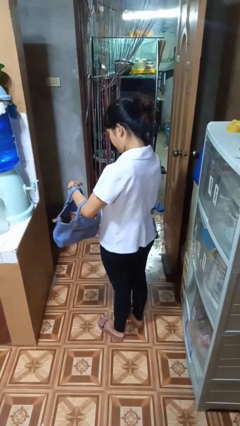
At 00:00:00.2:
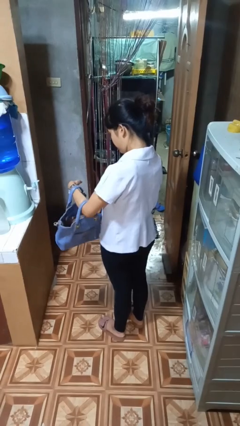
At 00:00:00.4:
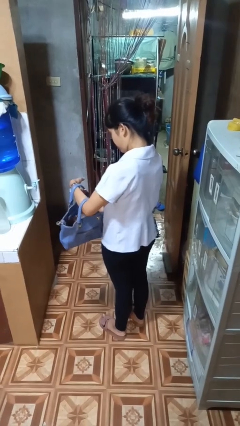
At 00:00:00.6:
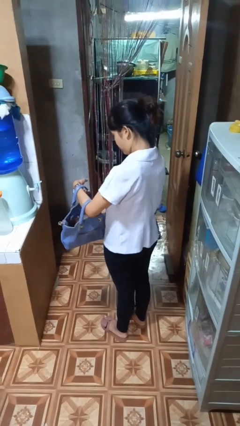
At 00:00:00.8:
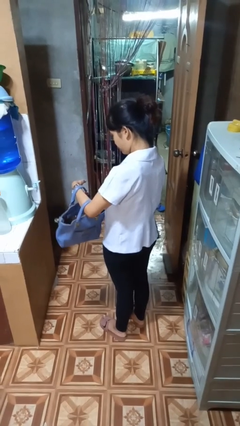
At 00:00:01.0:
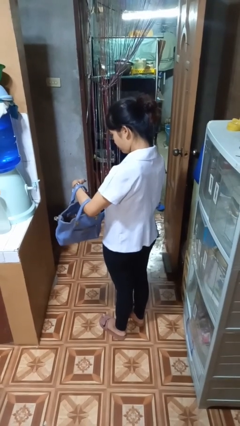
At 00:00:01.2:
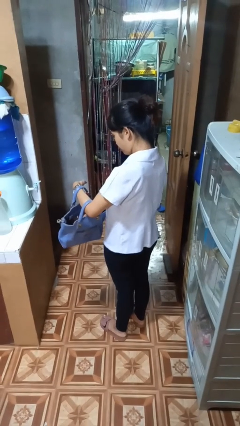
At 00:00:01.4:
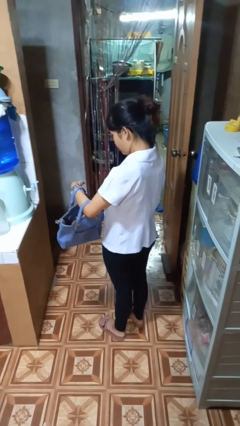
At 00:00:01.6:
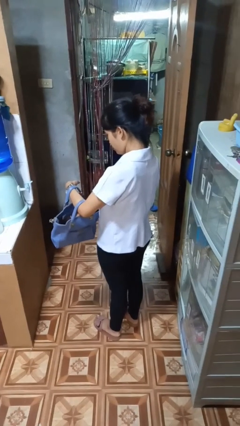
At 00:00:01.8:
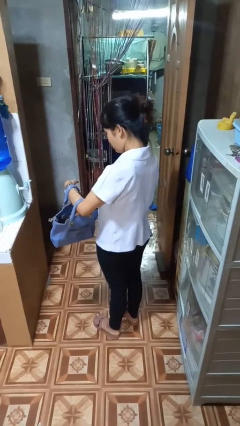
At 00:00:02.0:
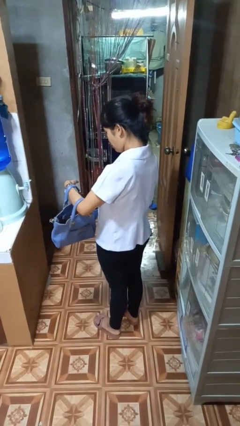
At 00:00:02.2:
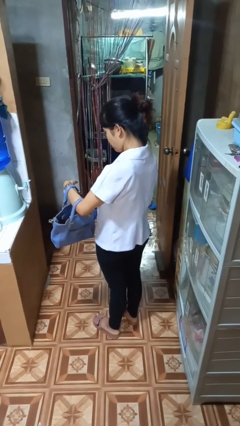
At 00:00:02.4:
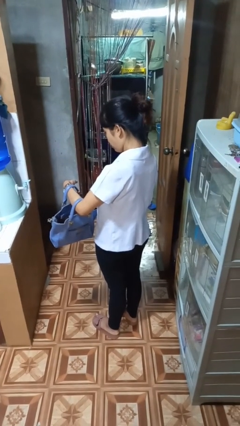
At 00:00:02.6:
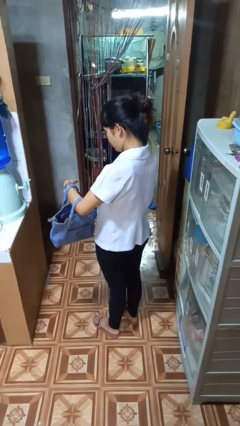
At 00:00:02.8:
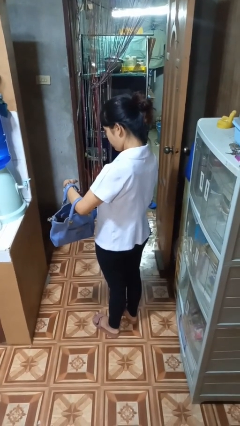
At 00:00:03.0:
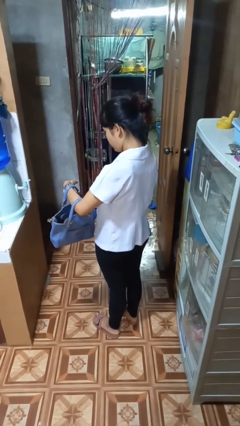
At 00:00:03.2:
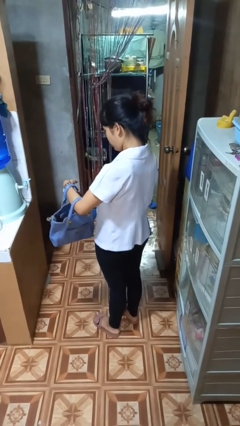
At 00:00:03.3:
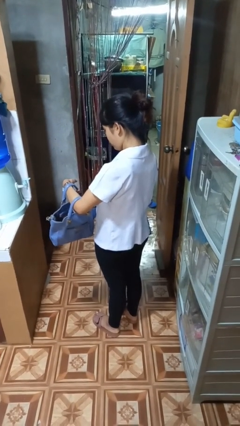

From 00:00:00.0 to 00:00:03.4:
person searches in purse

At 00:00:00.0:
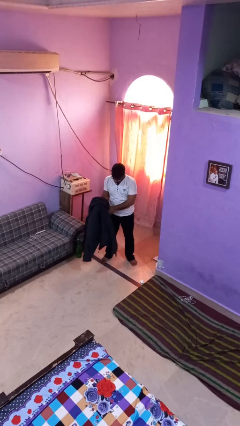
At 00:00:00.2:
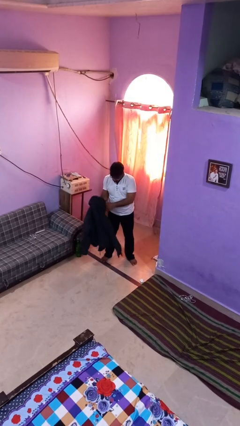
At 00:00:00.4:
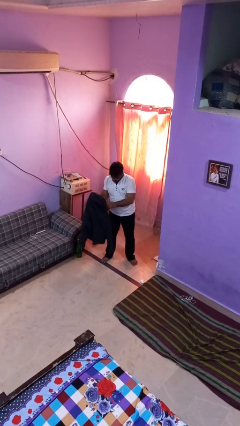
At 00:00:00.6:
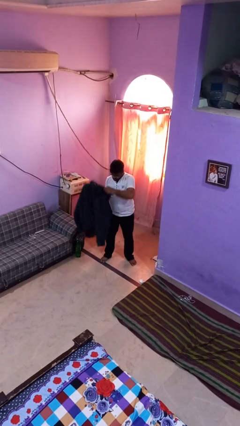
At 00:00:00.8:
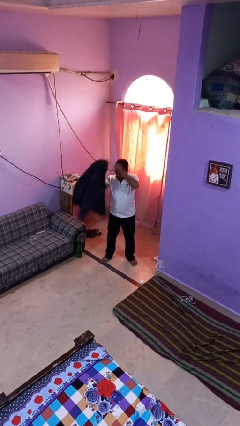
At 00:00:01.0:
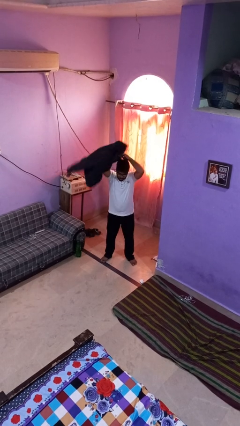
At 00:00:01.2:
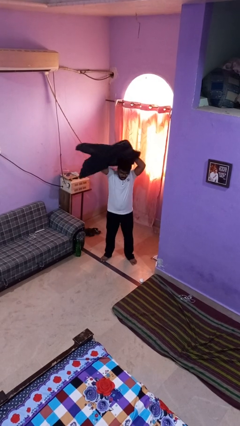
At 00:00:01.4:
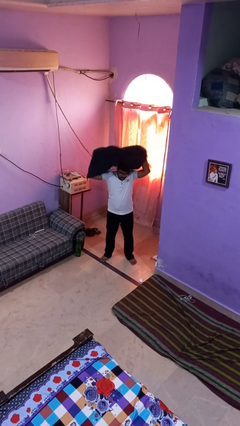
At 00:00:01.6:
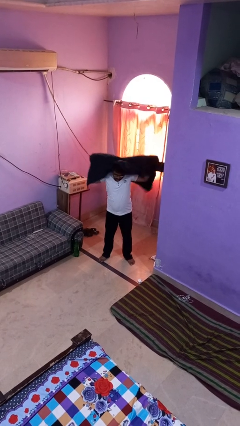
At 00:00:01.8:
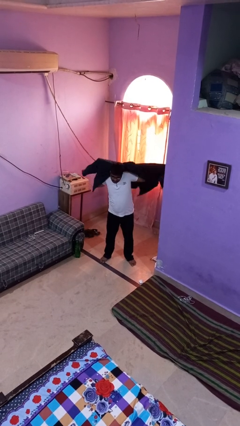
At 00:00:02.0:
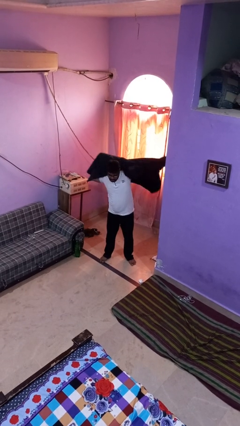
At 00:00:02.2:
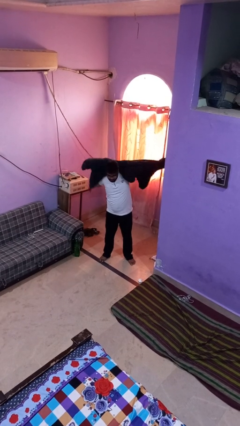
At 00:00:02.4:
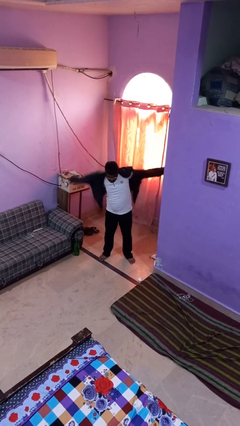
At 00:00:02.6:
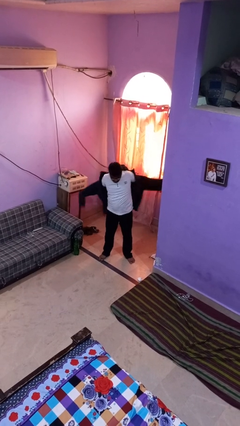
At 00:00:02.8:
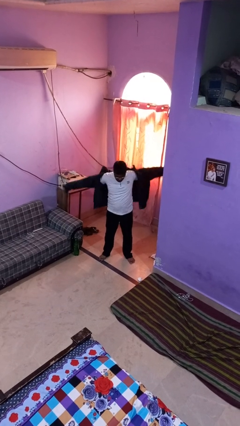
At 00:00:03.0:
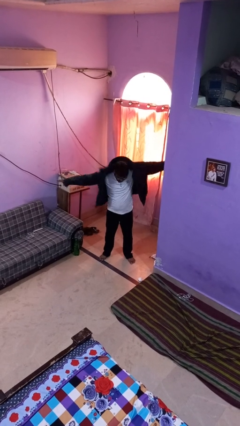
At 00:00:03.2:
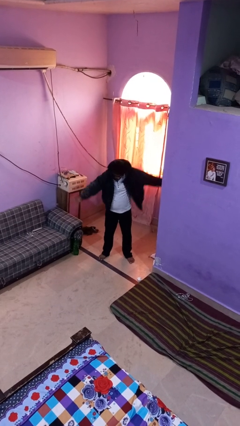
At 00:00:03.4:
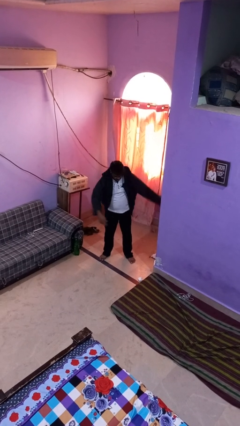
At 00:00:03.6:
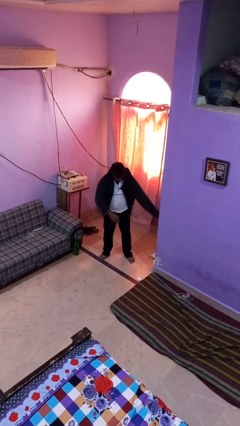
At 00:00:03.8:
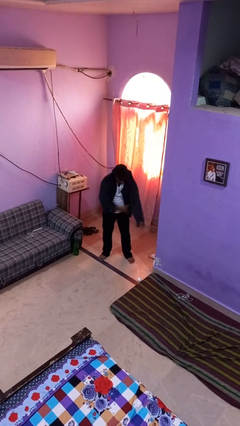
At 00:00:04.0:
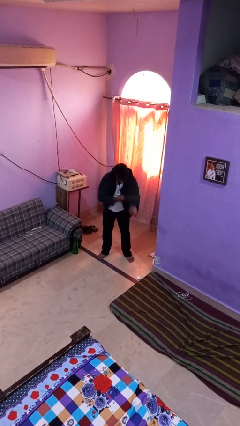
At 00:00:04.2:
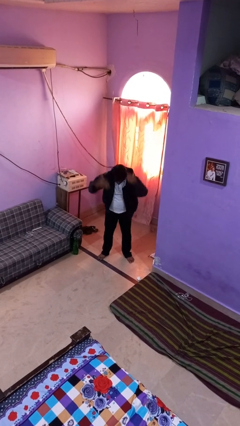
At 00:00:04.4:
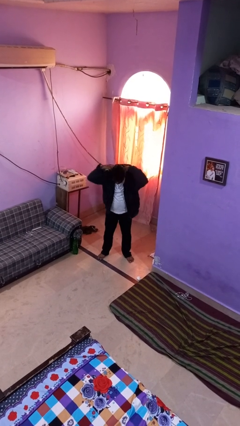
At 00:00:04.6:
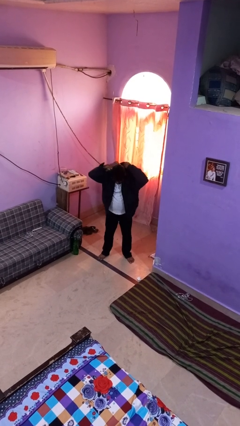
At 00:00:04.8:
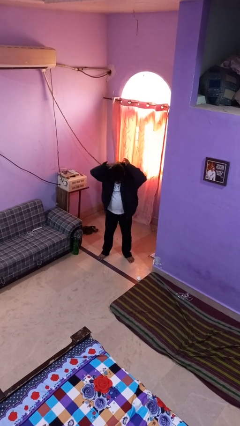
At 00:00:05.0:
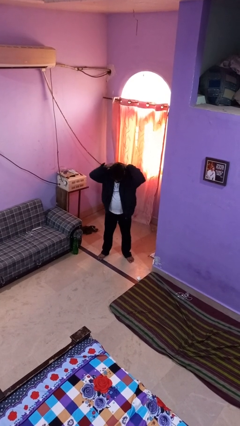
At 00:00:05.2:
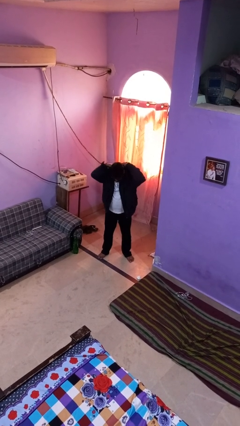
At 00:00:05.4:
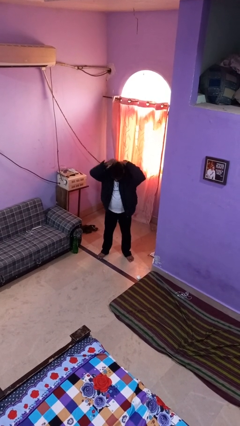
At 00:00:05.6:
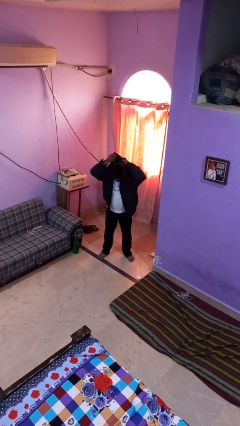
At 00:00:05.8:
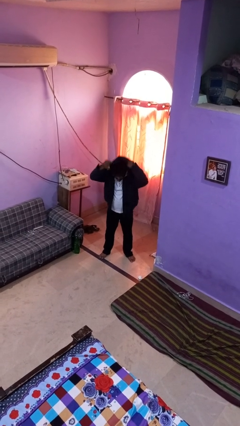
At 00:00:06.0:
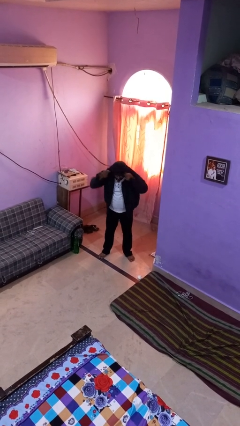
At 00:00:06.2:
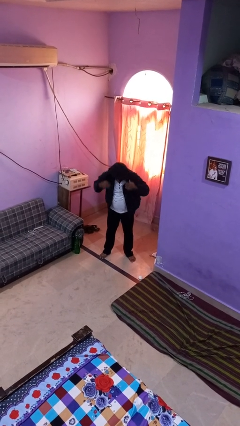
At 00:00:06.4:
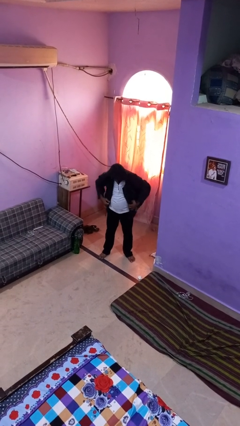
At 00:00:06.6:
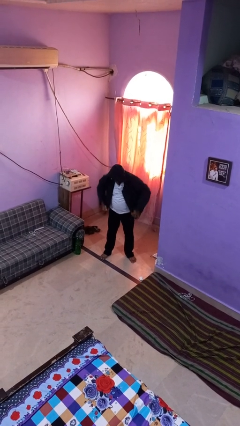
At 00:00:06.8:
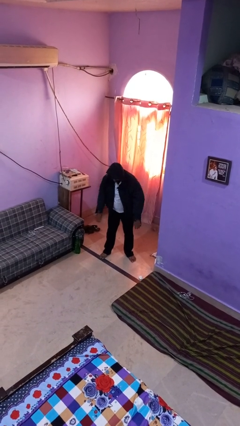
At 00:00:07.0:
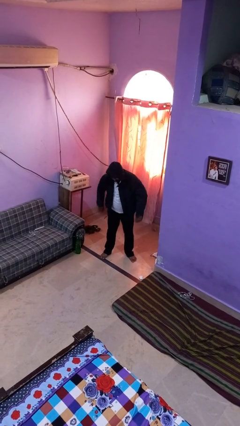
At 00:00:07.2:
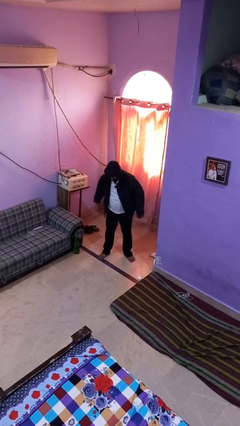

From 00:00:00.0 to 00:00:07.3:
person puts on hoodie

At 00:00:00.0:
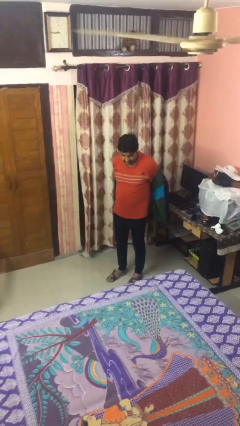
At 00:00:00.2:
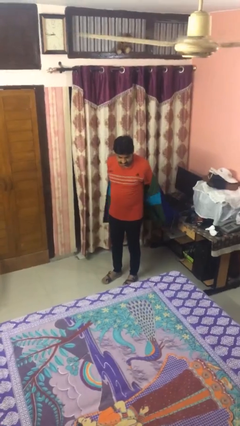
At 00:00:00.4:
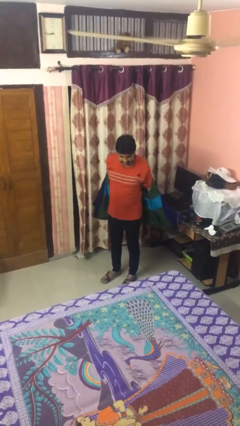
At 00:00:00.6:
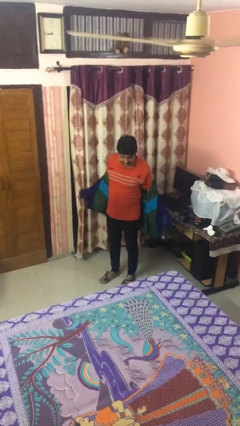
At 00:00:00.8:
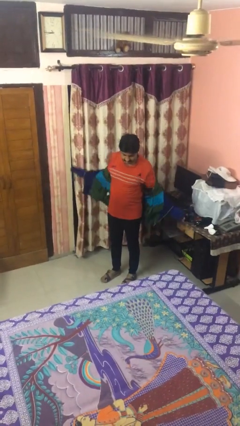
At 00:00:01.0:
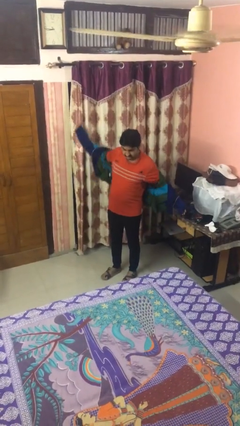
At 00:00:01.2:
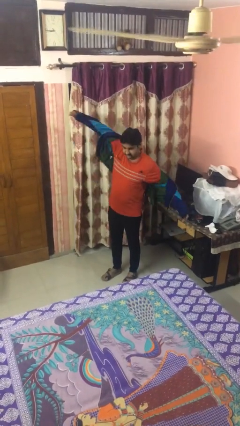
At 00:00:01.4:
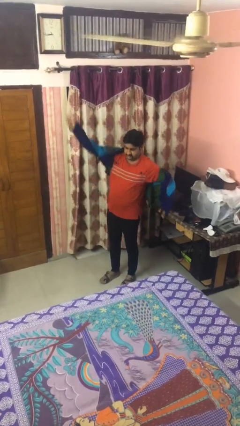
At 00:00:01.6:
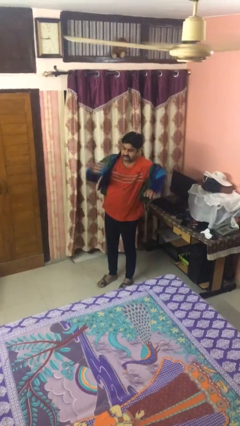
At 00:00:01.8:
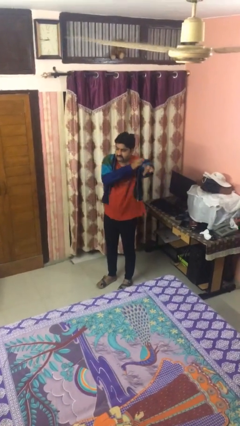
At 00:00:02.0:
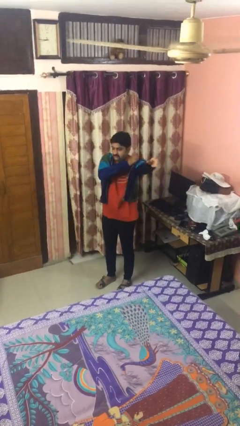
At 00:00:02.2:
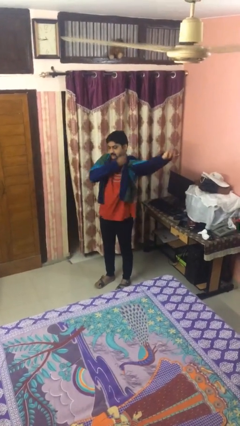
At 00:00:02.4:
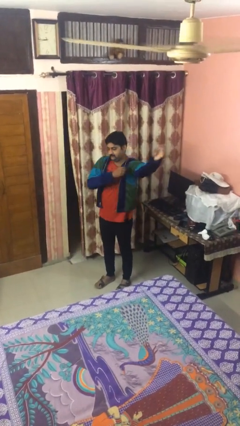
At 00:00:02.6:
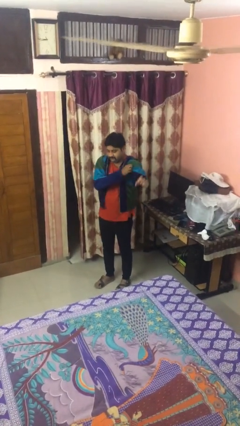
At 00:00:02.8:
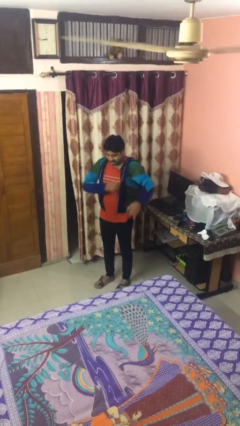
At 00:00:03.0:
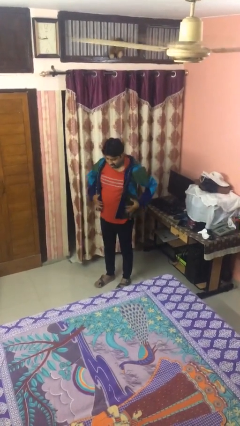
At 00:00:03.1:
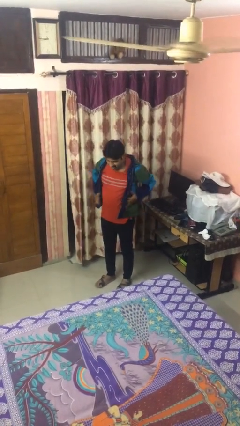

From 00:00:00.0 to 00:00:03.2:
person puts on jacket

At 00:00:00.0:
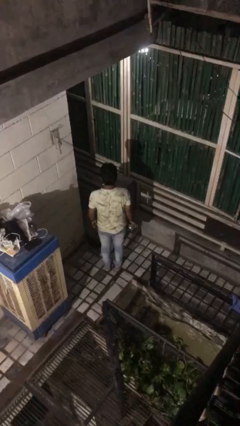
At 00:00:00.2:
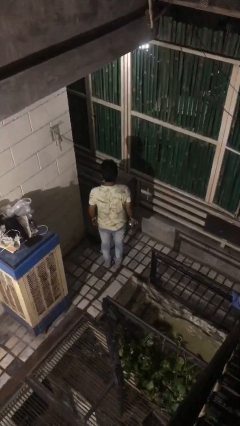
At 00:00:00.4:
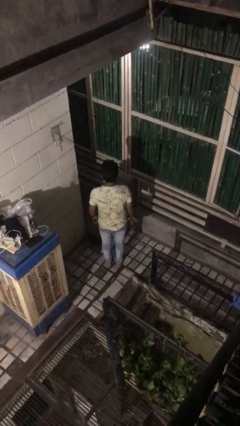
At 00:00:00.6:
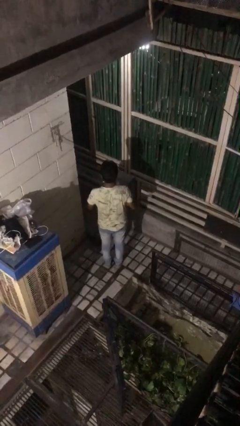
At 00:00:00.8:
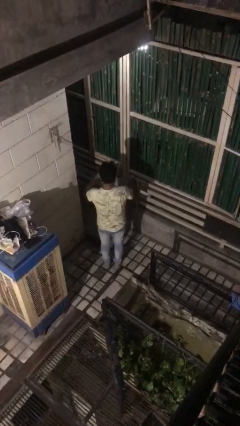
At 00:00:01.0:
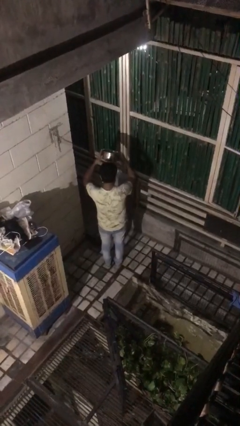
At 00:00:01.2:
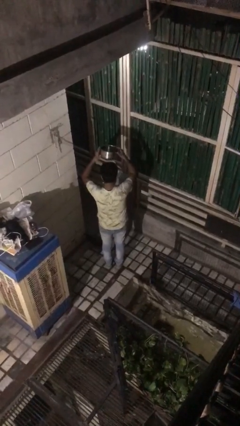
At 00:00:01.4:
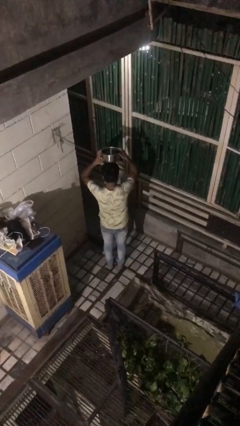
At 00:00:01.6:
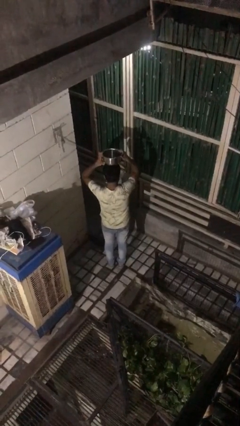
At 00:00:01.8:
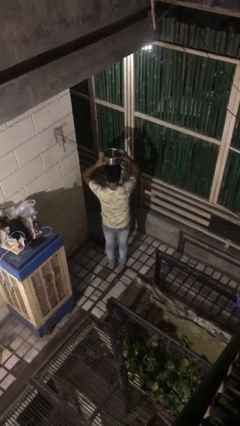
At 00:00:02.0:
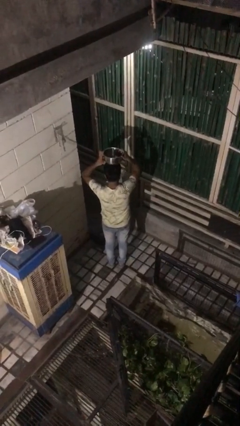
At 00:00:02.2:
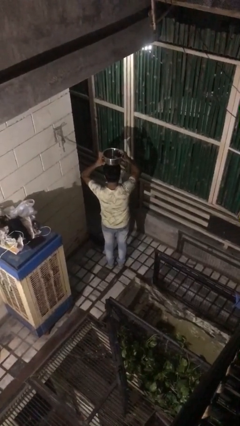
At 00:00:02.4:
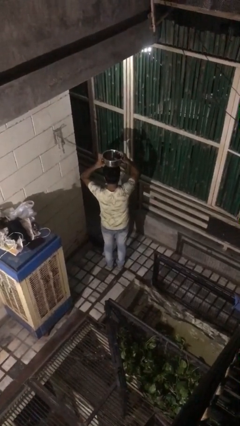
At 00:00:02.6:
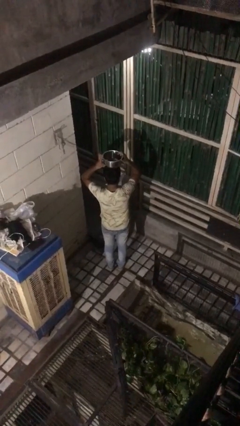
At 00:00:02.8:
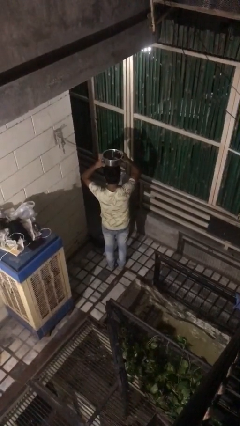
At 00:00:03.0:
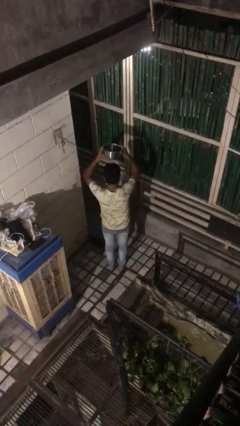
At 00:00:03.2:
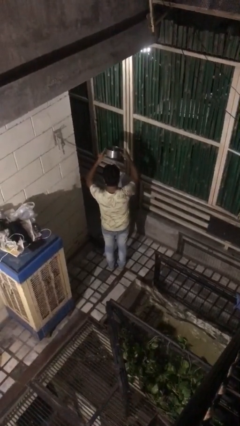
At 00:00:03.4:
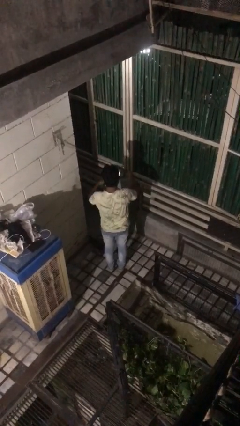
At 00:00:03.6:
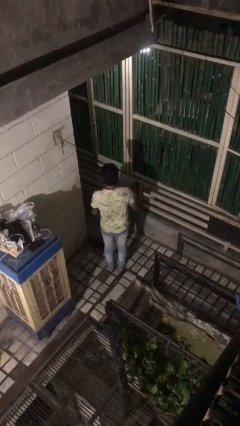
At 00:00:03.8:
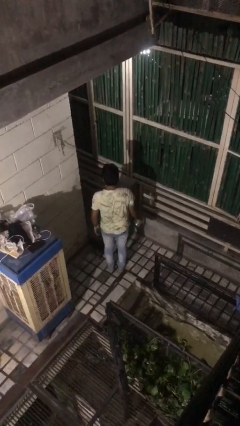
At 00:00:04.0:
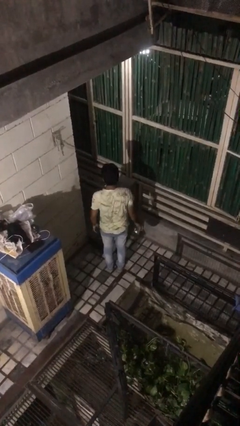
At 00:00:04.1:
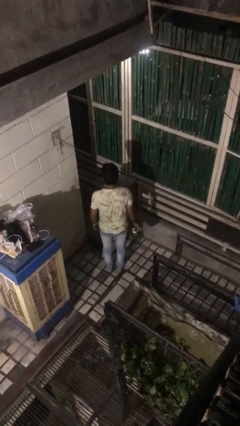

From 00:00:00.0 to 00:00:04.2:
person holds object above head
